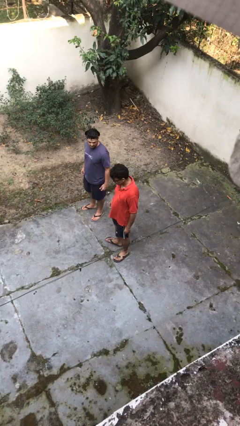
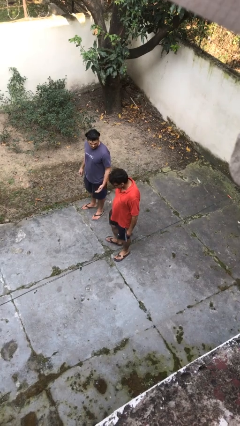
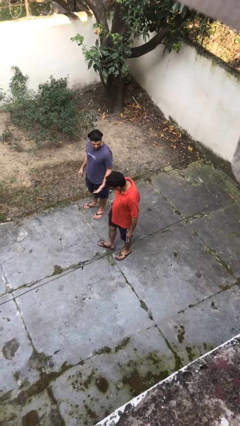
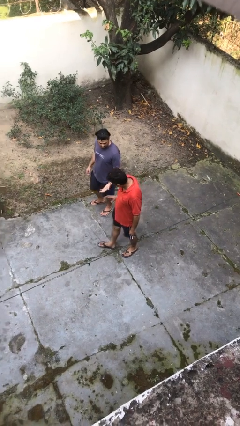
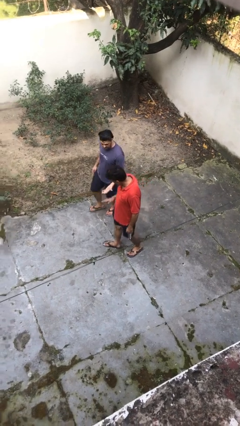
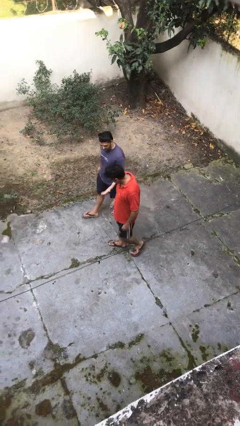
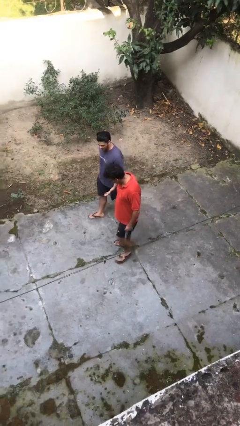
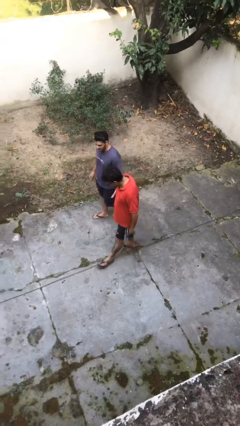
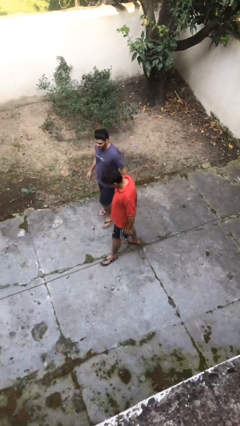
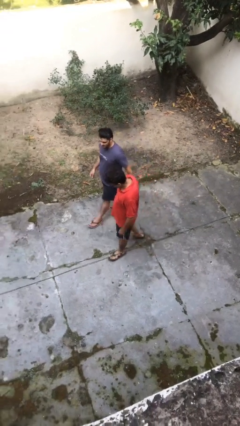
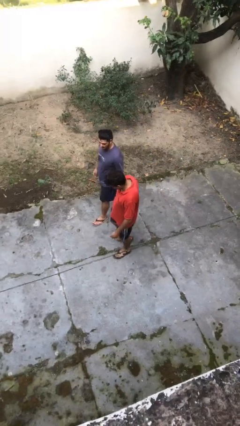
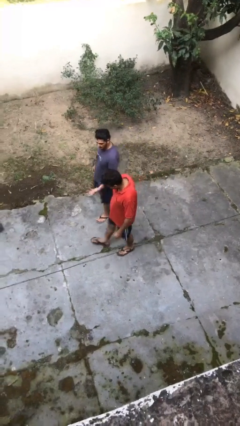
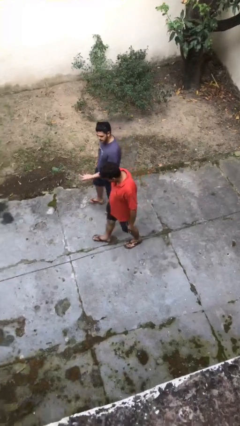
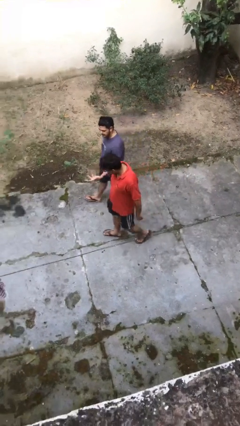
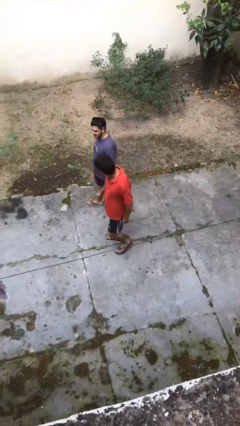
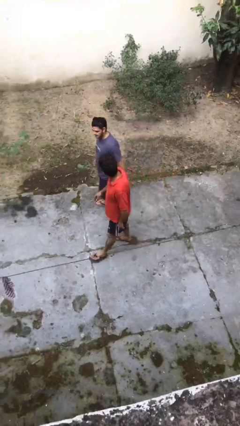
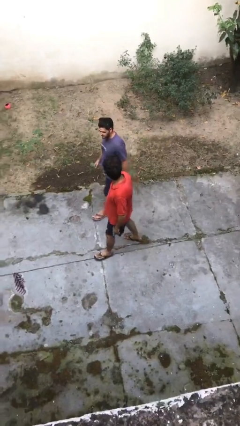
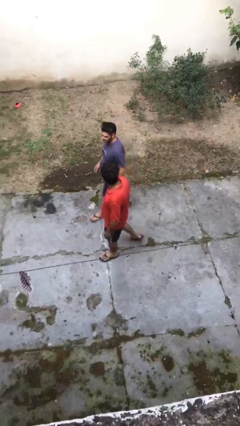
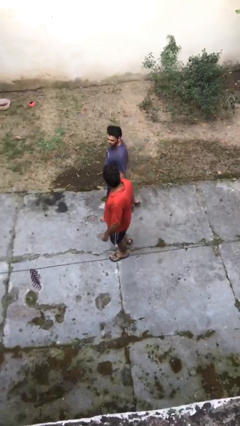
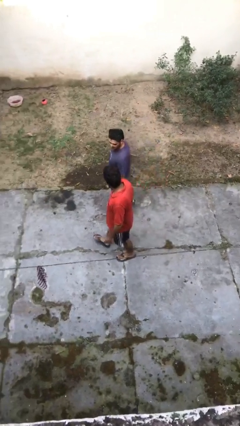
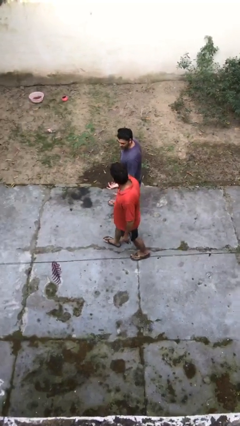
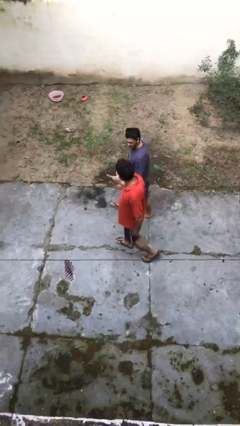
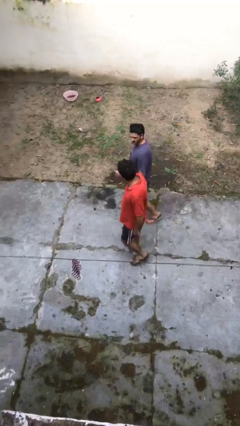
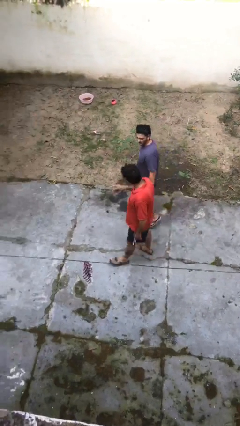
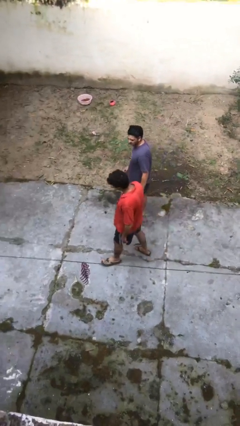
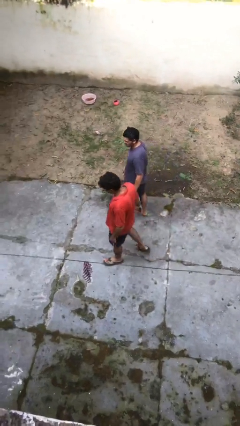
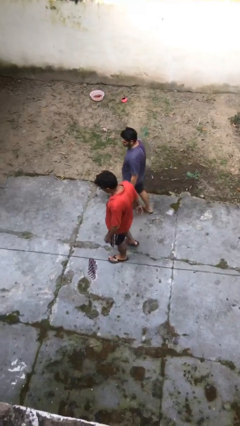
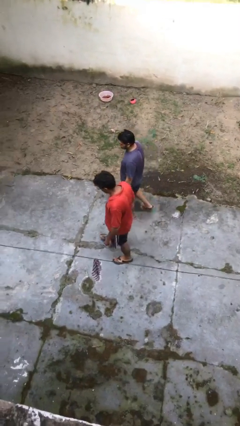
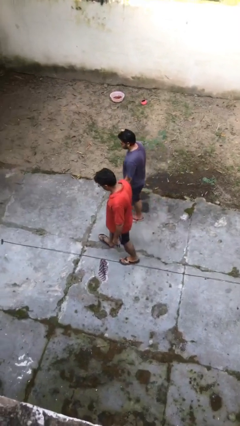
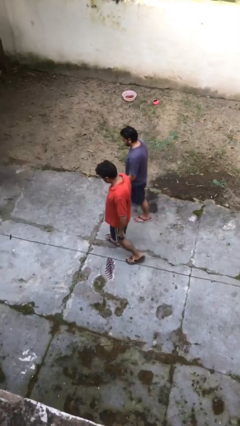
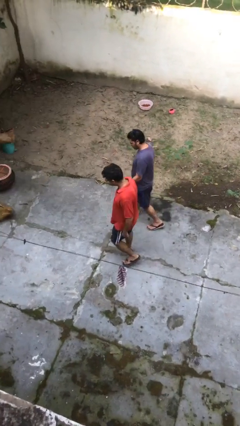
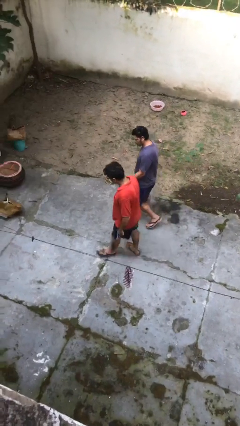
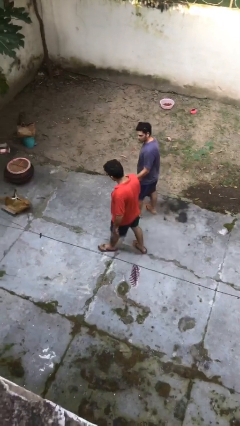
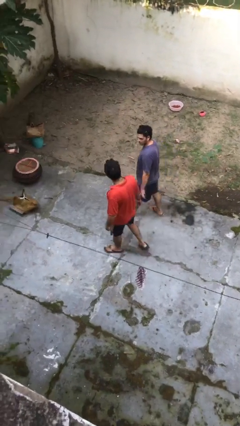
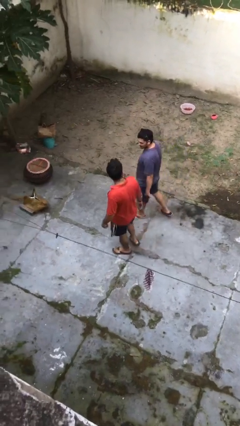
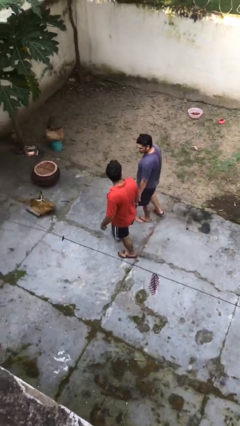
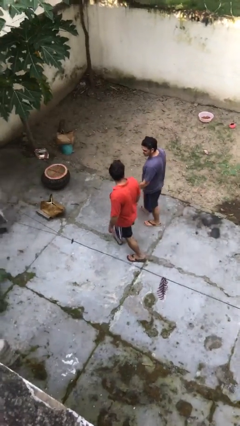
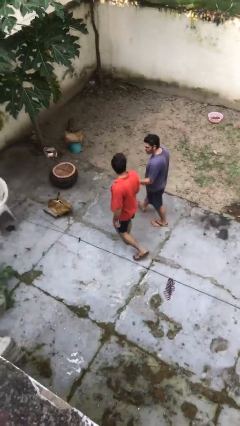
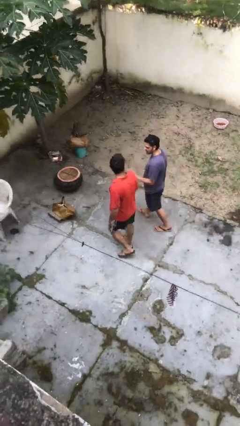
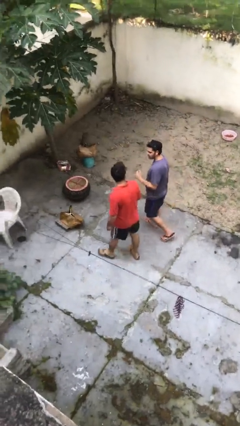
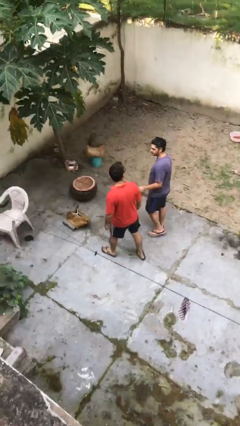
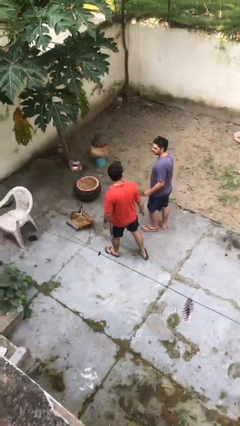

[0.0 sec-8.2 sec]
person talks to person

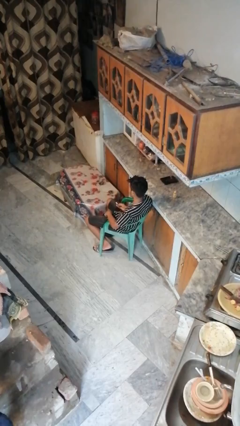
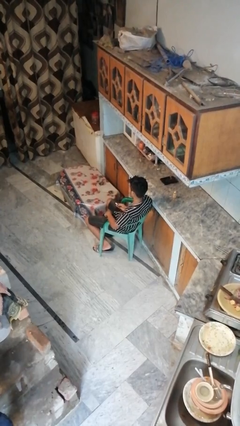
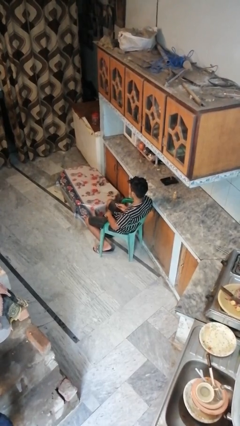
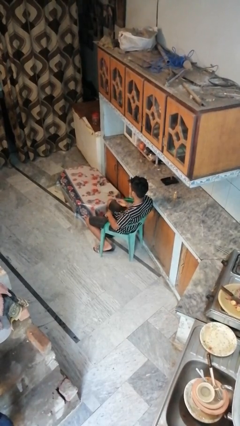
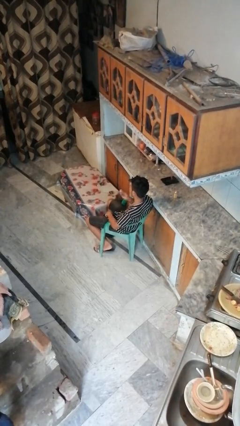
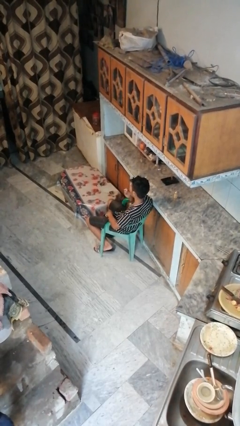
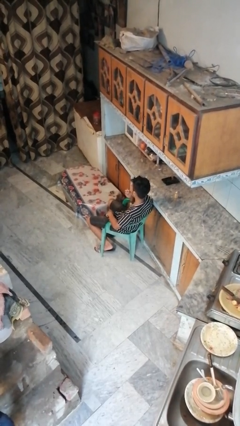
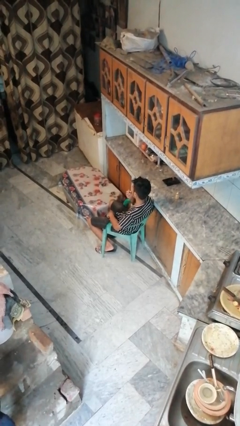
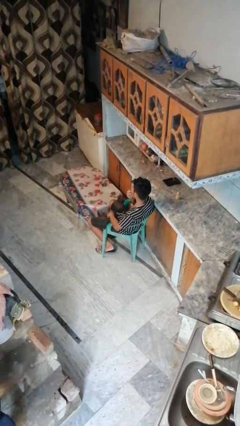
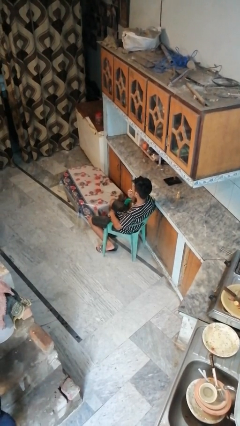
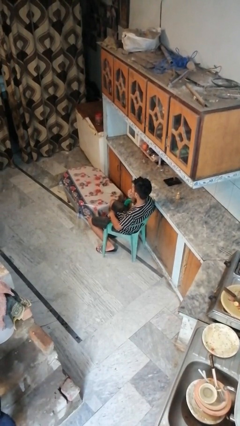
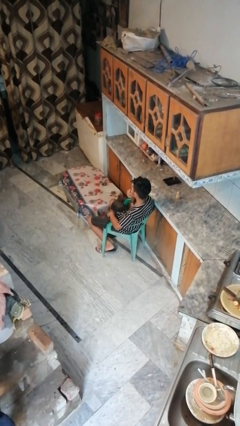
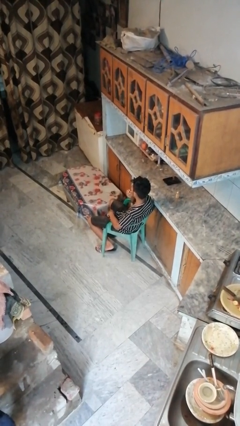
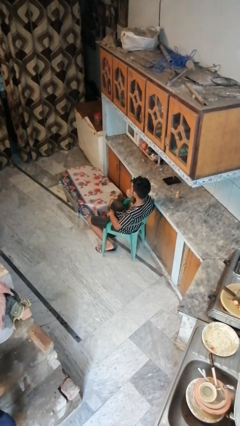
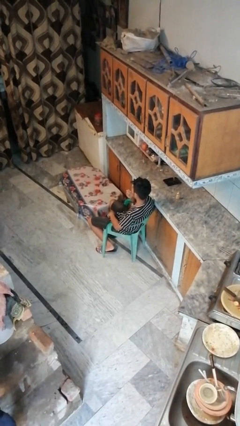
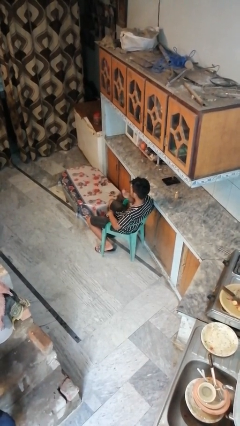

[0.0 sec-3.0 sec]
person applies lip makeup

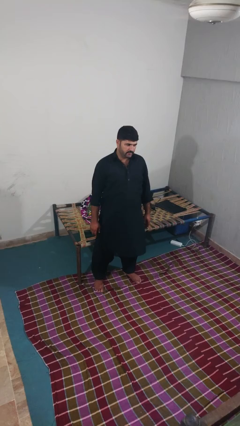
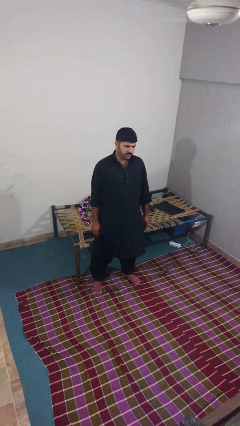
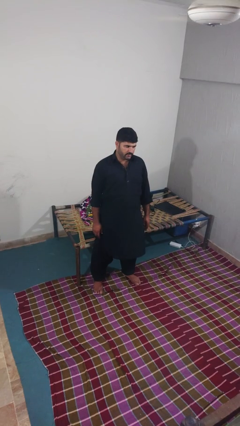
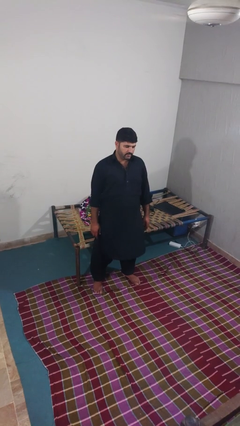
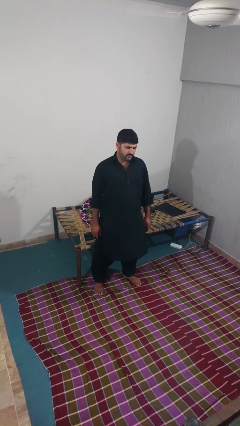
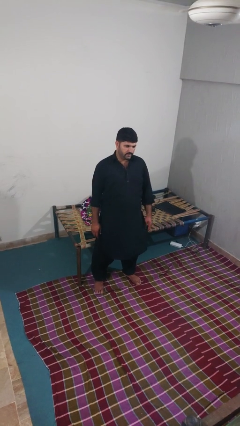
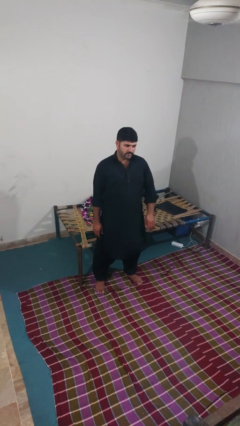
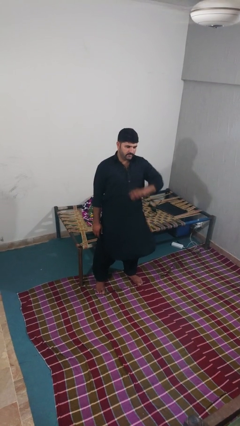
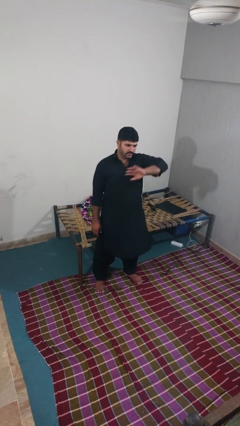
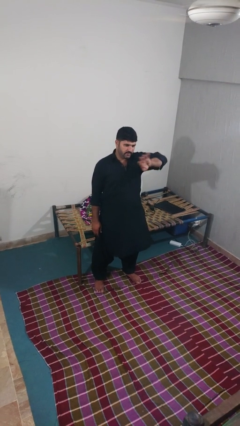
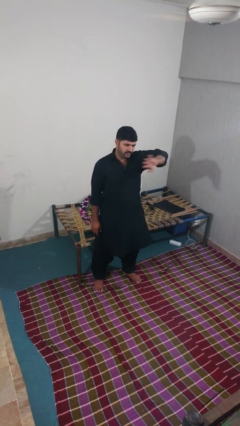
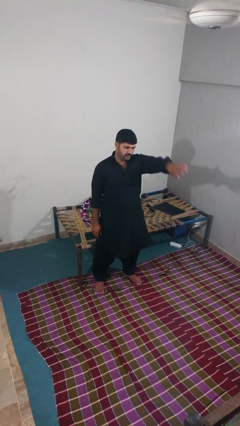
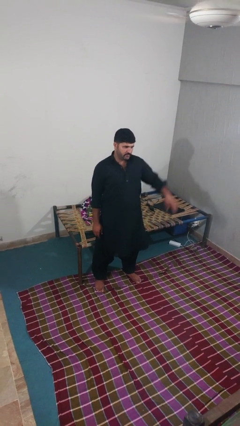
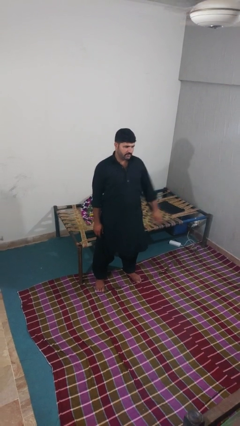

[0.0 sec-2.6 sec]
person gestures swipe left

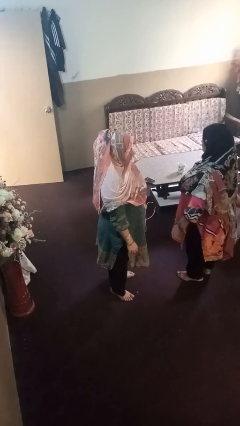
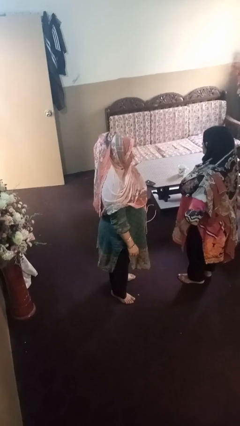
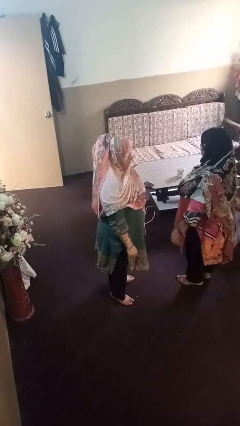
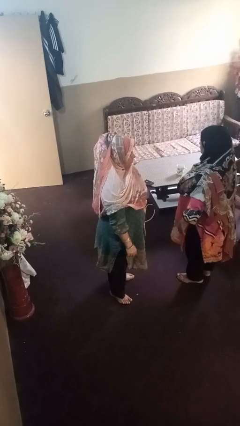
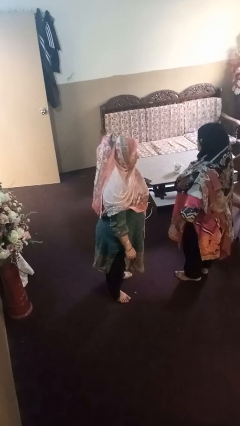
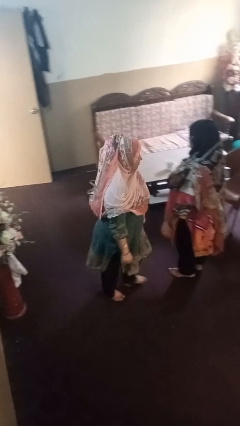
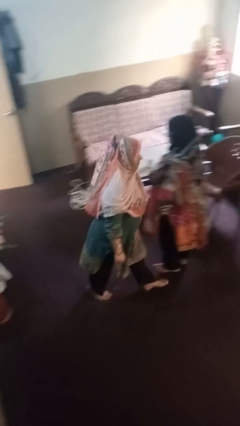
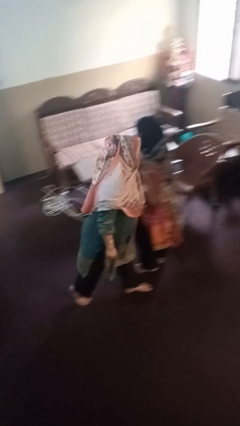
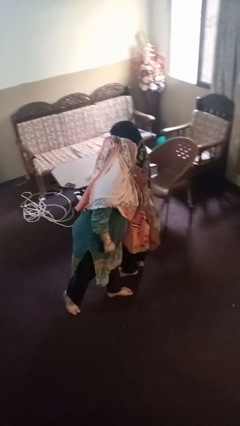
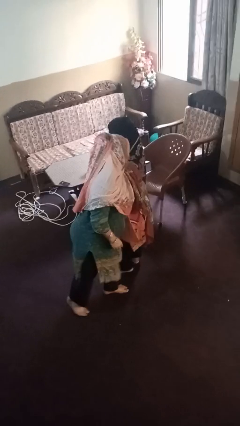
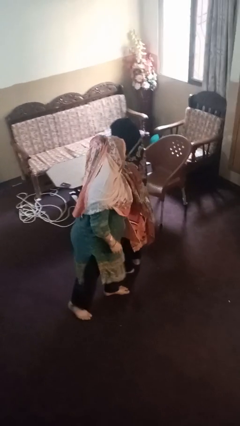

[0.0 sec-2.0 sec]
person shoves person

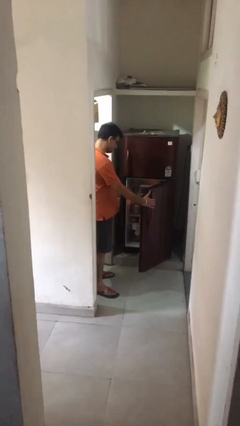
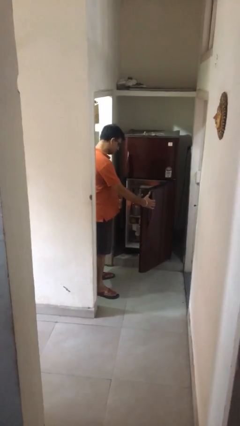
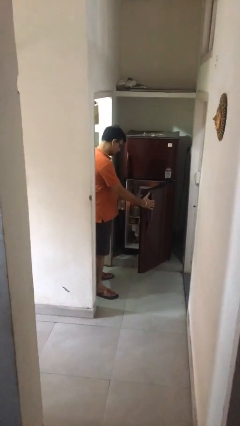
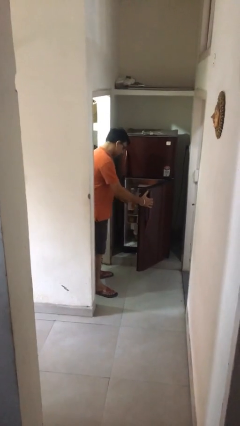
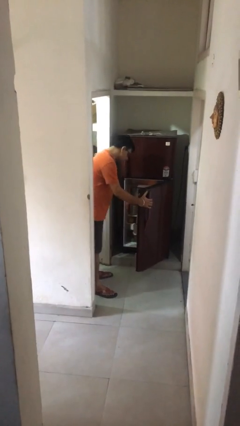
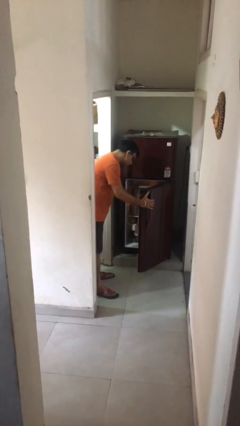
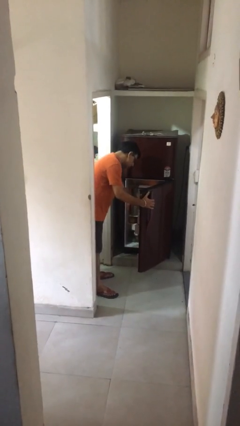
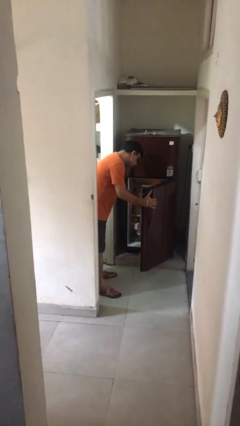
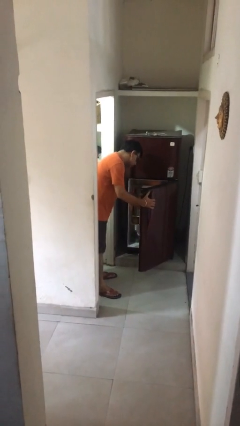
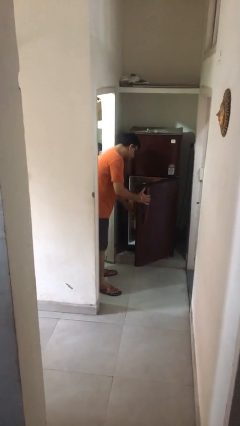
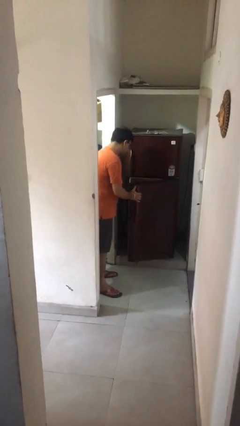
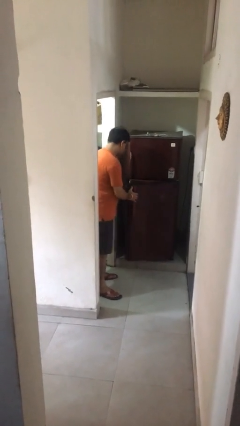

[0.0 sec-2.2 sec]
person puts object into refrigerator
